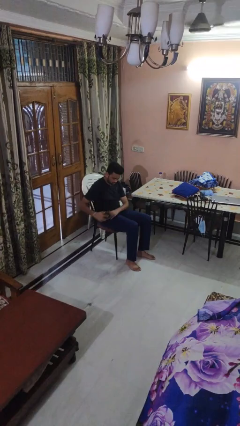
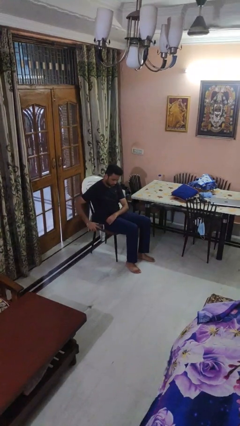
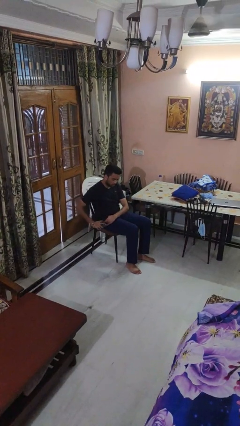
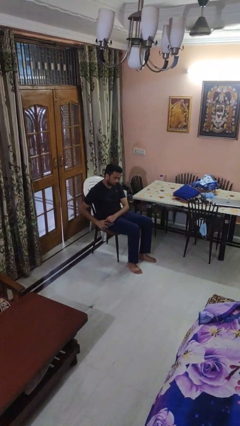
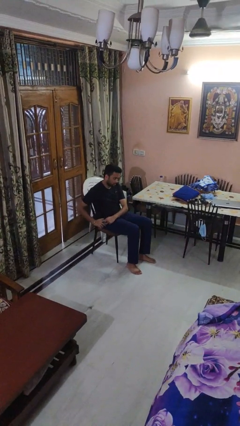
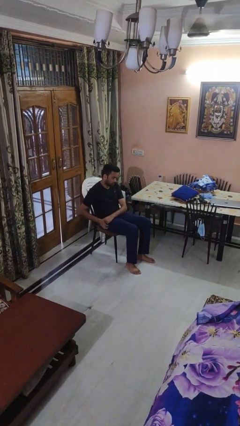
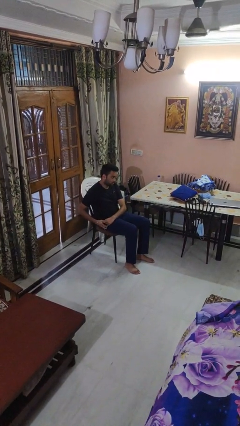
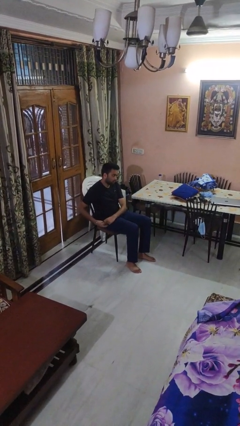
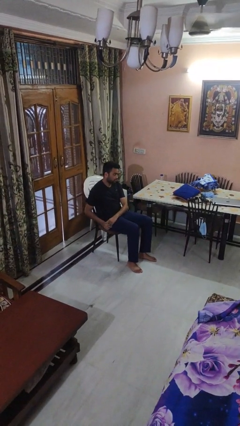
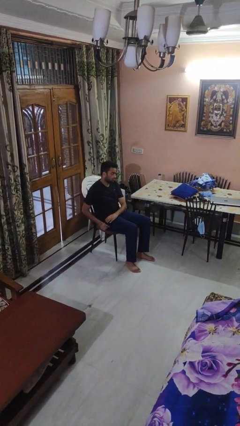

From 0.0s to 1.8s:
person puts phone into pocket

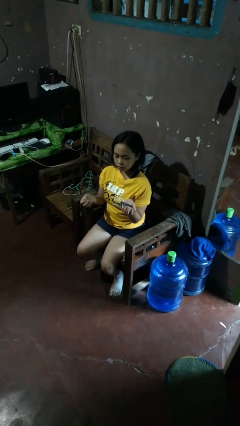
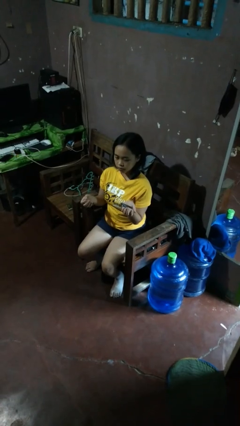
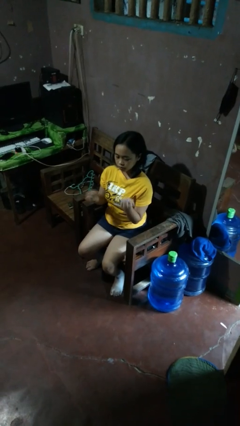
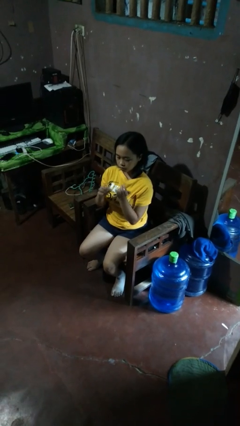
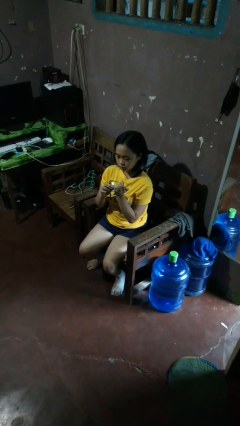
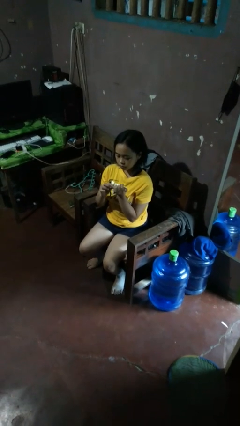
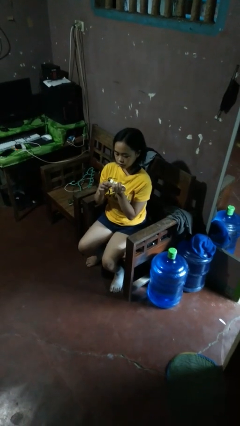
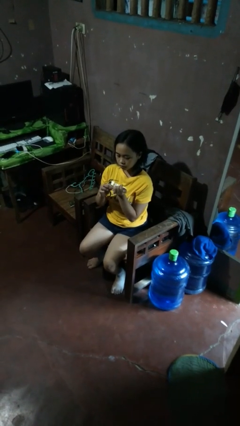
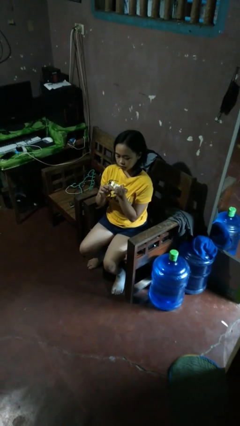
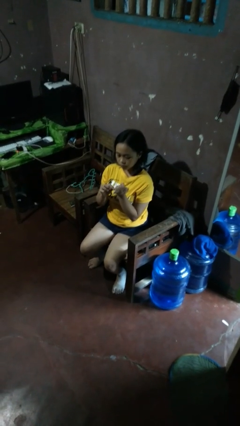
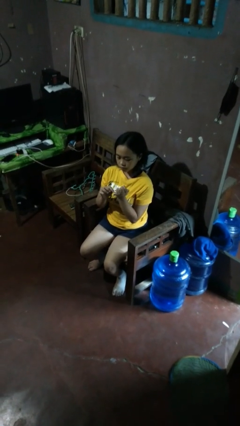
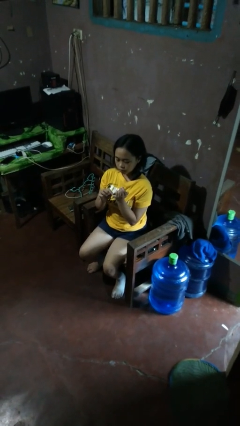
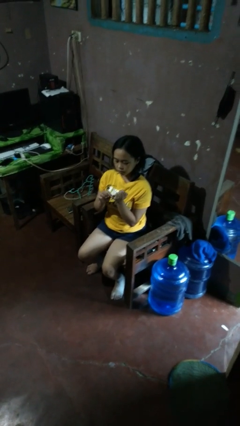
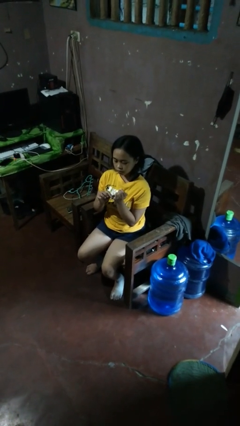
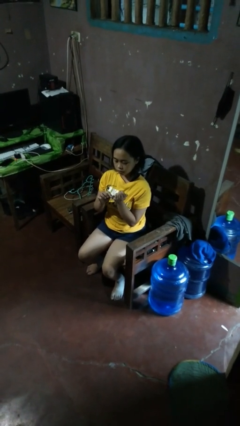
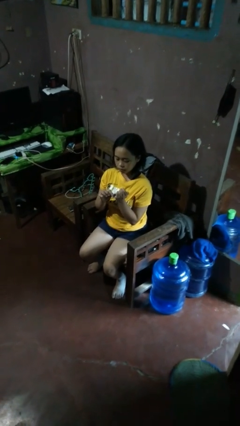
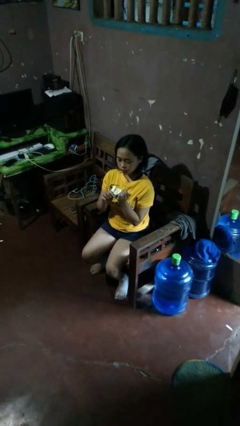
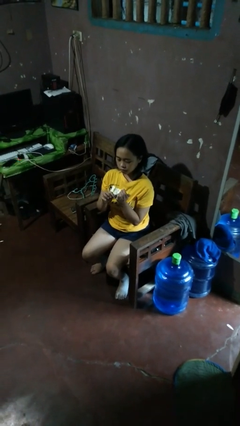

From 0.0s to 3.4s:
person clips fingernails

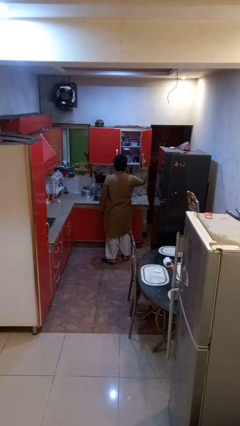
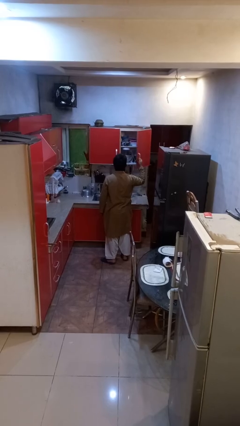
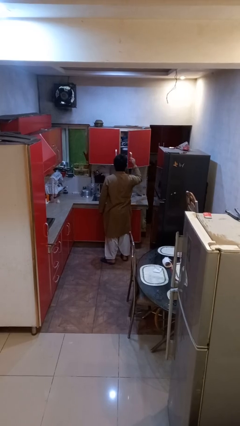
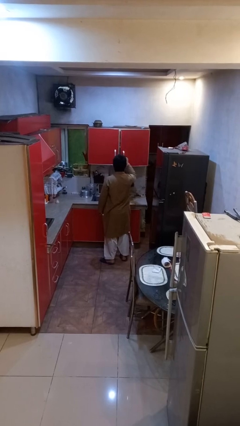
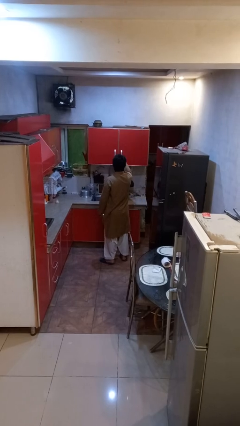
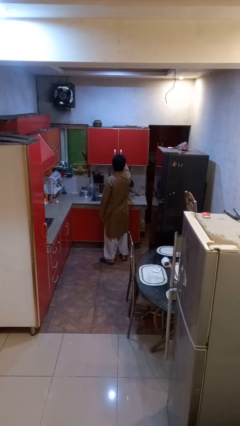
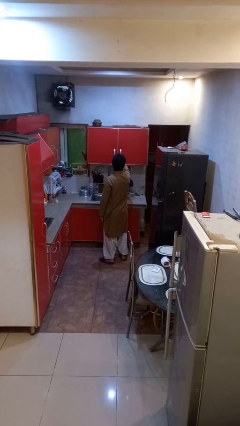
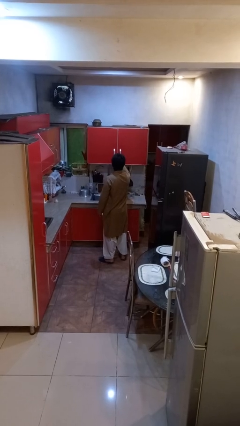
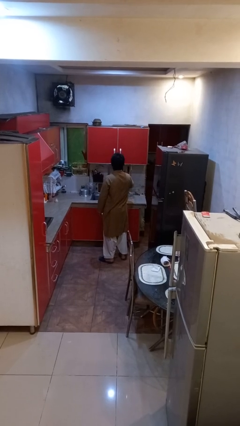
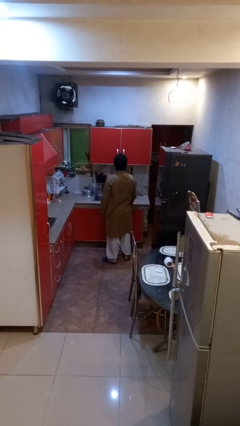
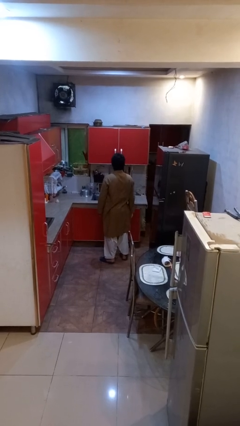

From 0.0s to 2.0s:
person closes cabinet

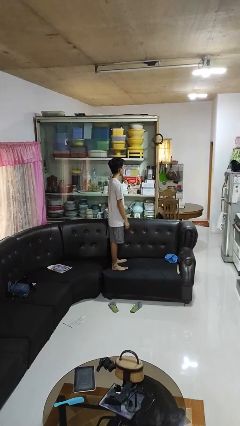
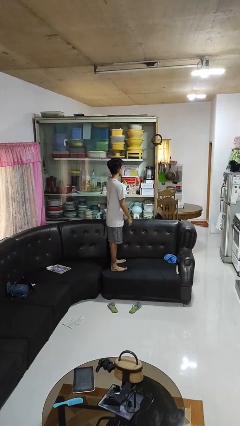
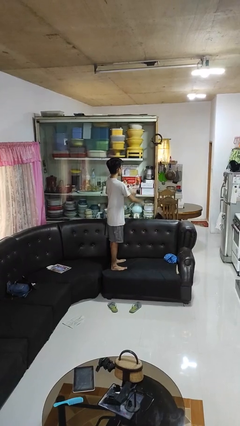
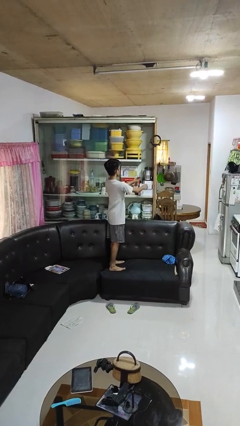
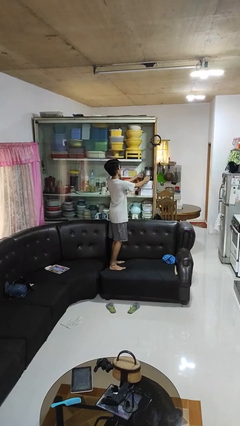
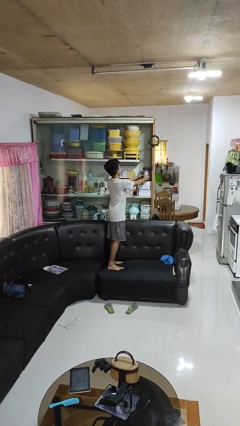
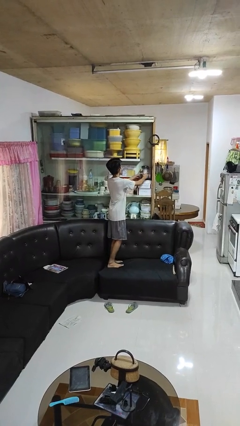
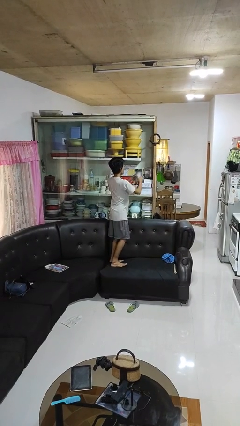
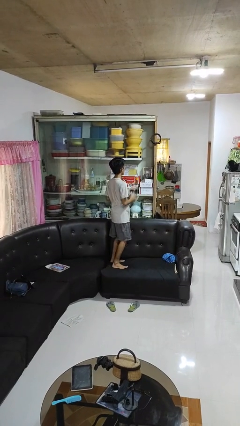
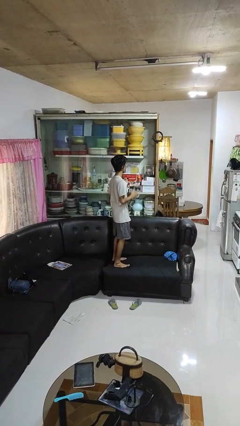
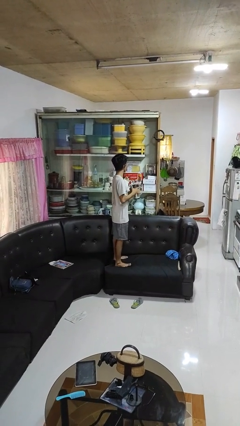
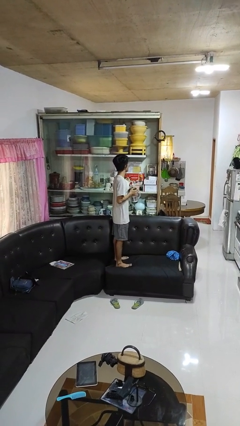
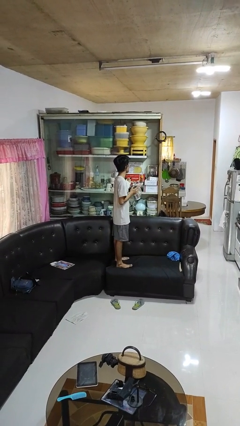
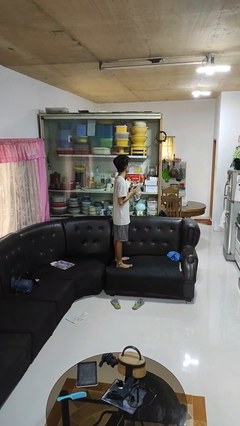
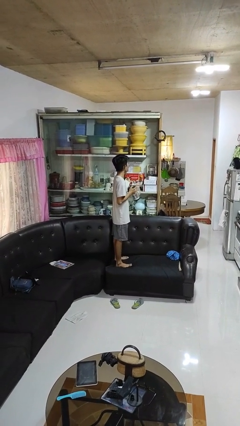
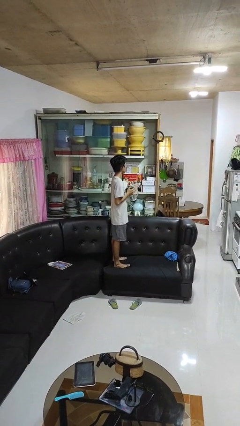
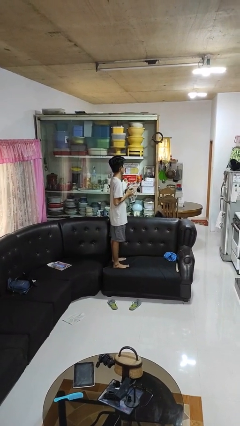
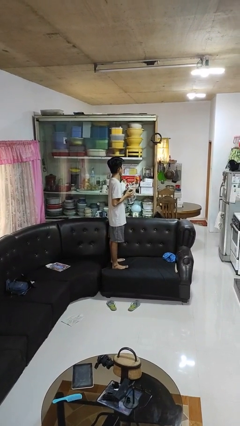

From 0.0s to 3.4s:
person picks up object from cabinet

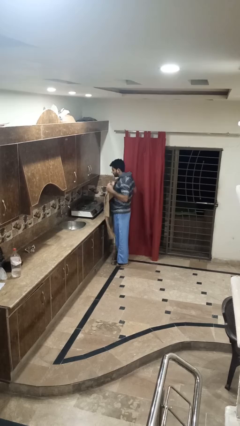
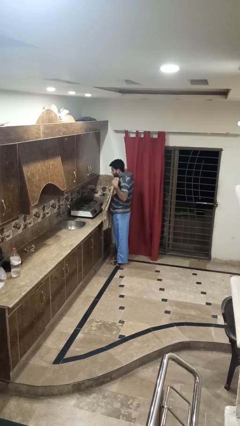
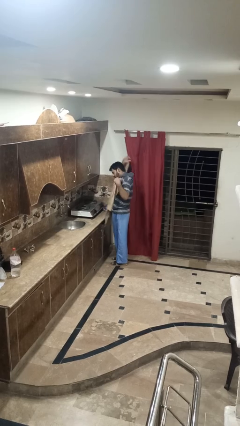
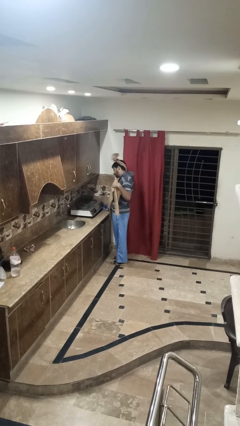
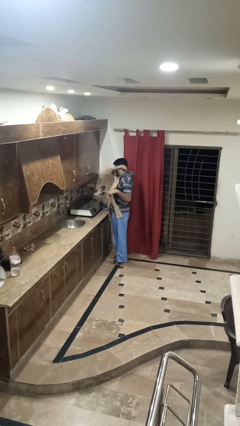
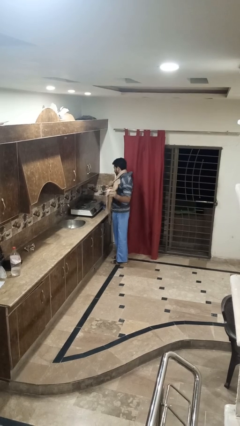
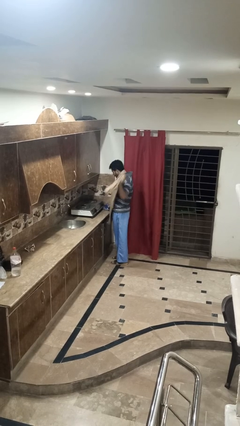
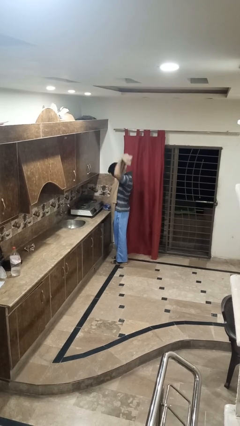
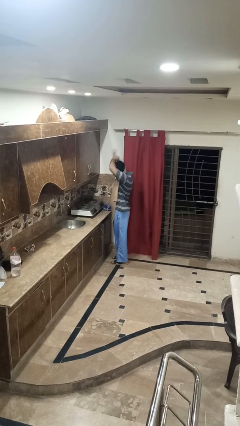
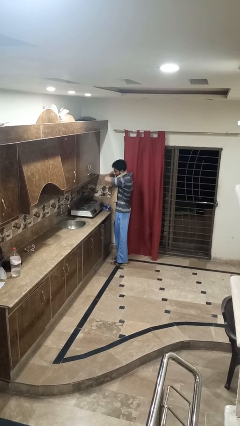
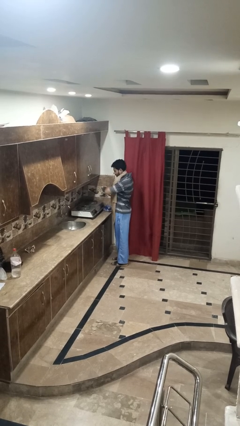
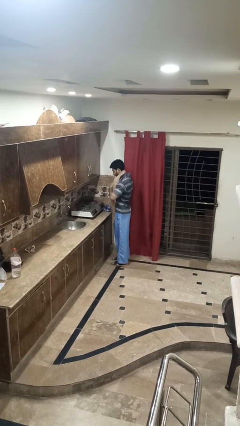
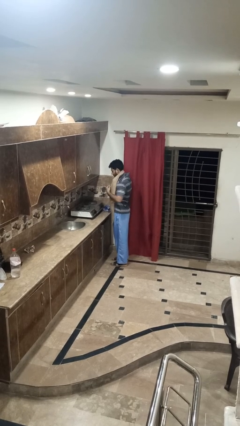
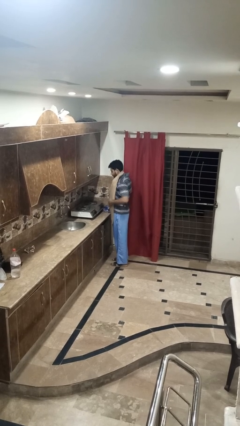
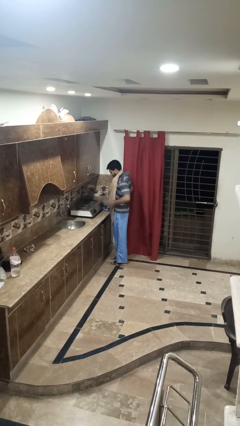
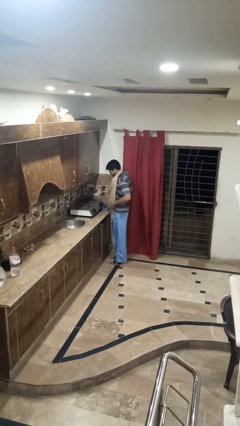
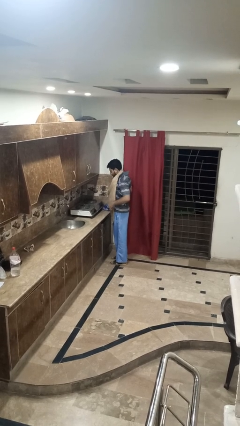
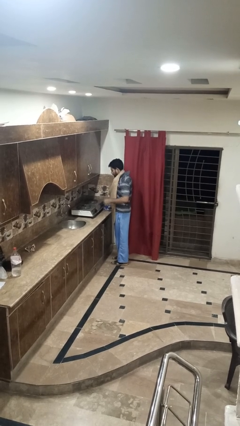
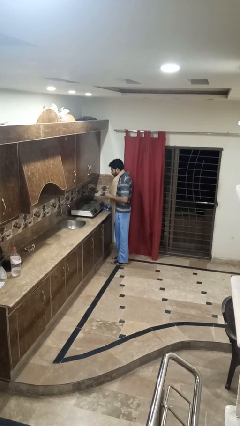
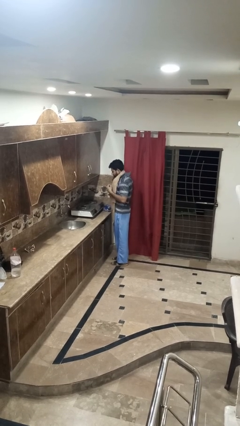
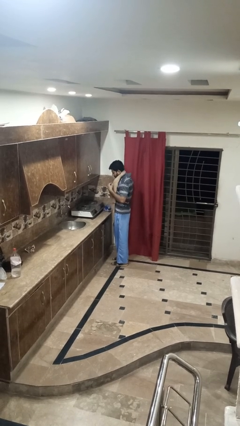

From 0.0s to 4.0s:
person puts on apron

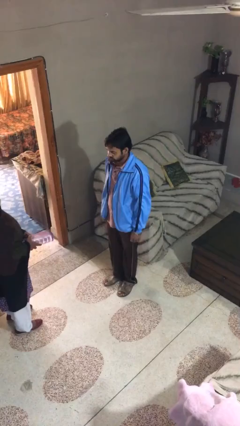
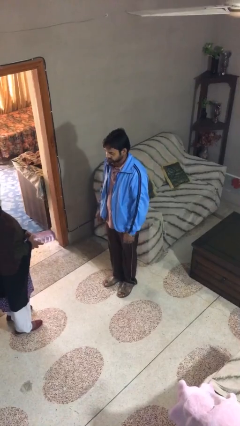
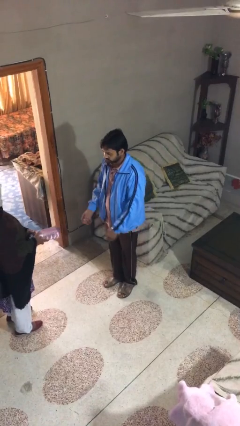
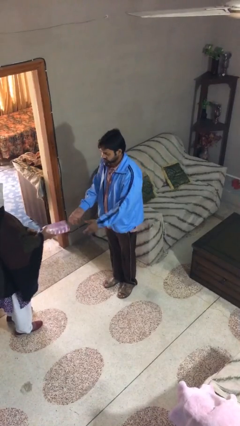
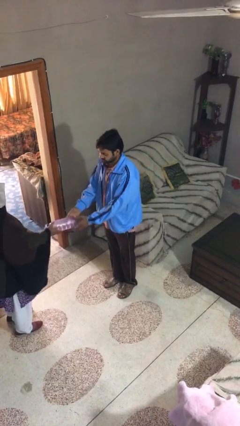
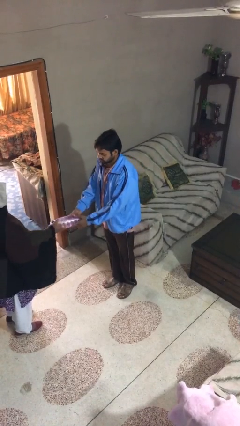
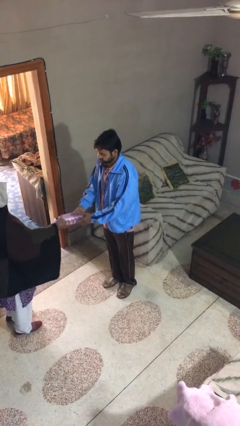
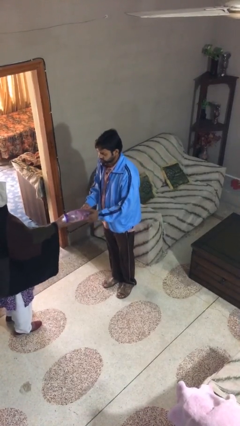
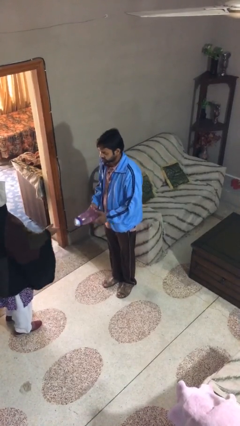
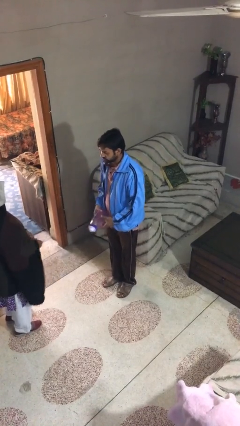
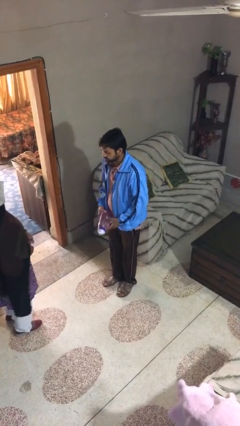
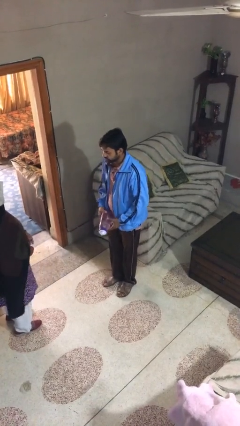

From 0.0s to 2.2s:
person transfers object to person

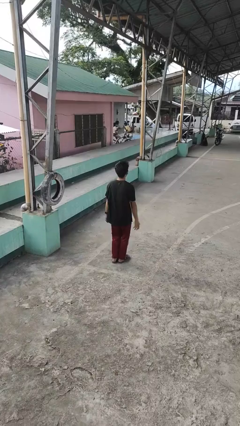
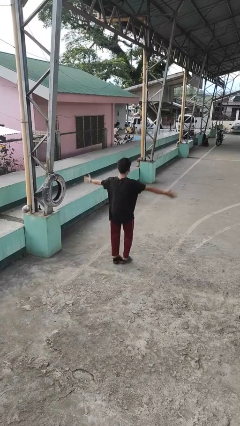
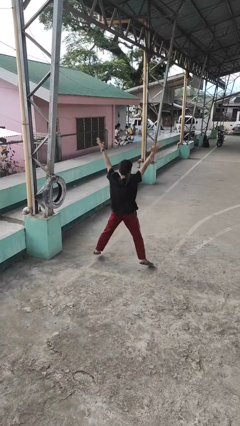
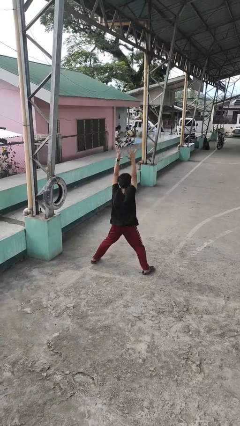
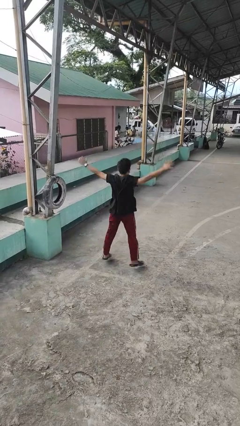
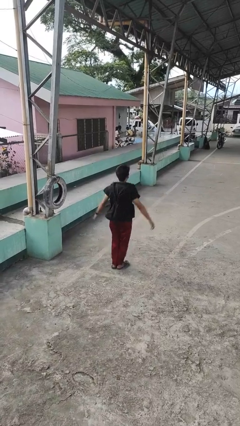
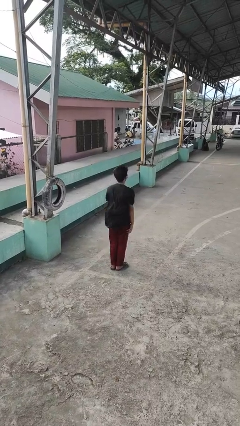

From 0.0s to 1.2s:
person exercises with jumping jacks
